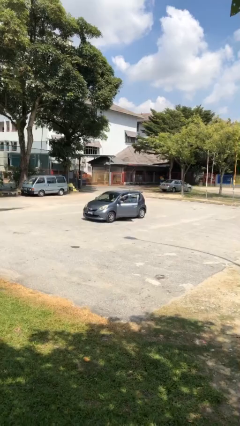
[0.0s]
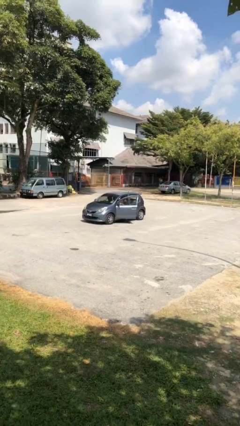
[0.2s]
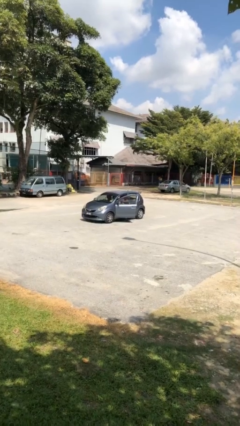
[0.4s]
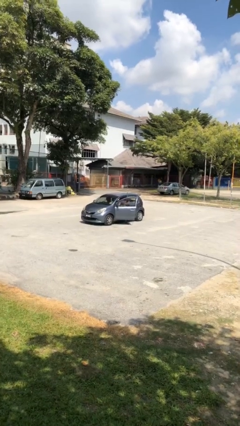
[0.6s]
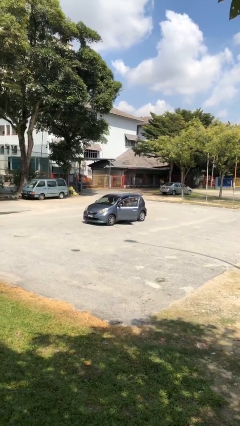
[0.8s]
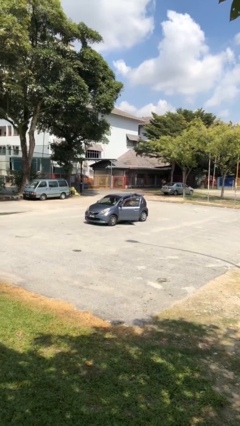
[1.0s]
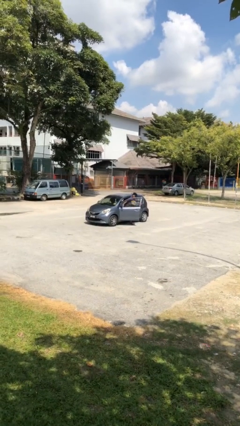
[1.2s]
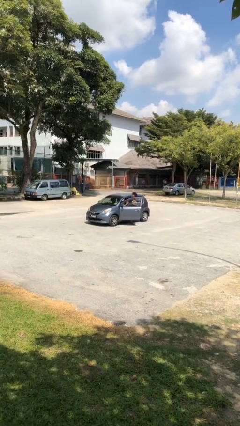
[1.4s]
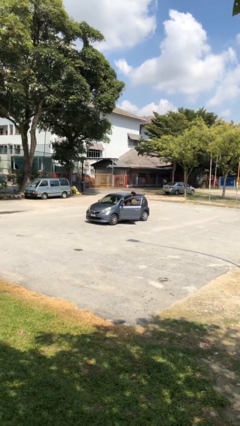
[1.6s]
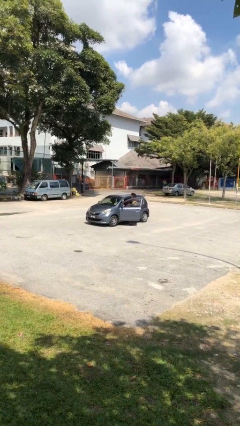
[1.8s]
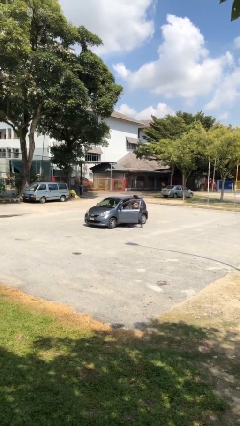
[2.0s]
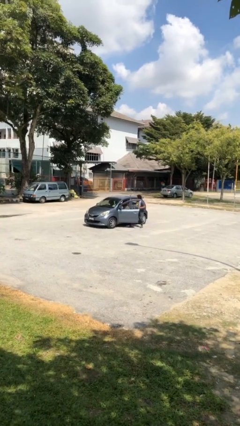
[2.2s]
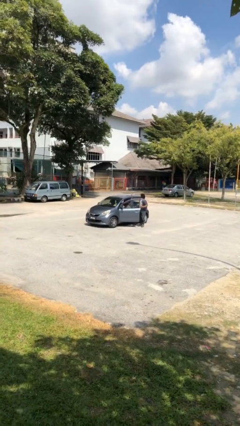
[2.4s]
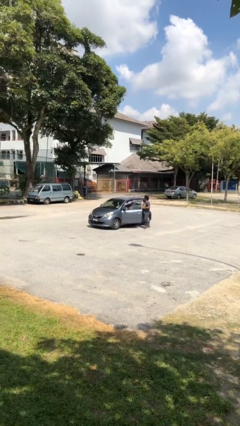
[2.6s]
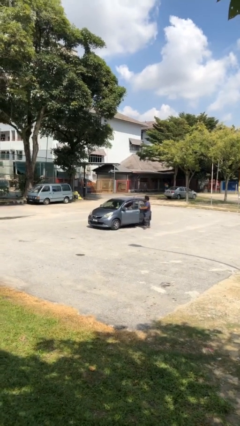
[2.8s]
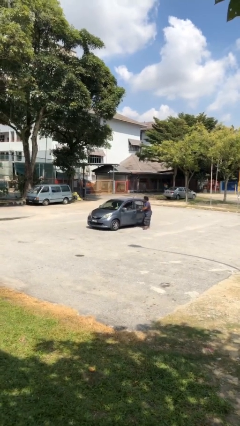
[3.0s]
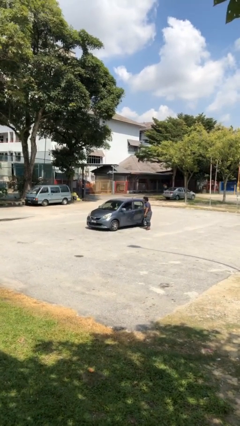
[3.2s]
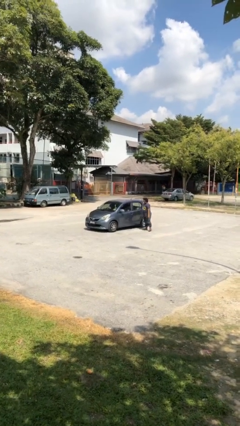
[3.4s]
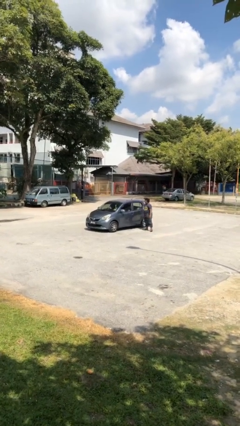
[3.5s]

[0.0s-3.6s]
car drops off person

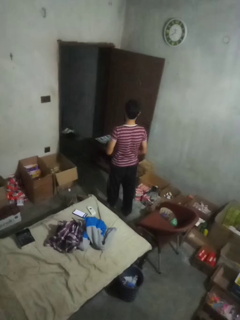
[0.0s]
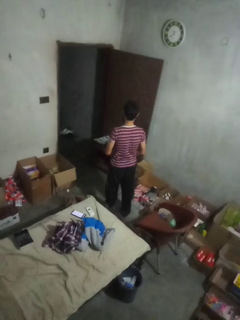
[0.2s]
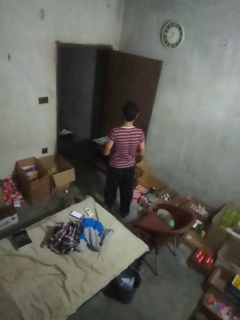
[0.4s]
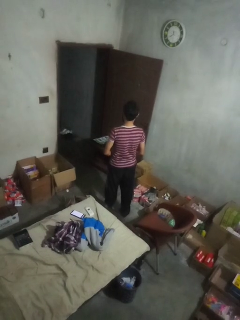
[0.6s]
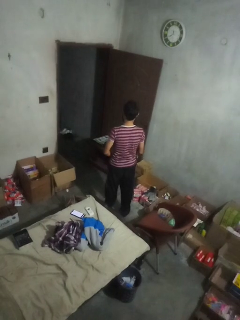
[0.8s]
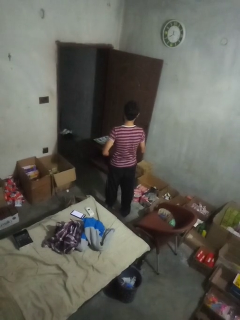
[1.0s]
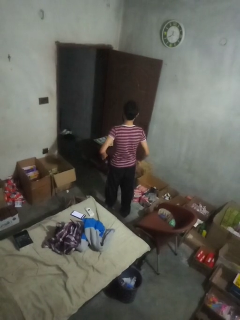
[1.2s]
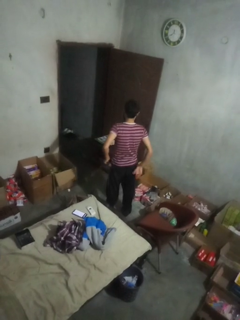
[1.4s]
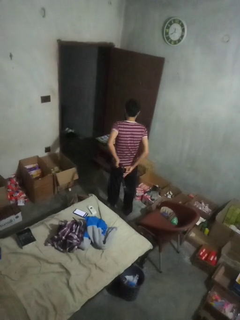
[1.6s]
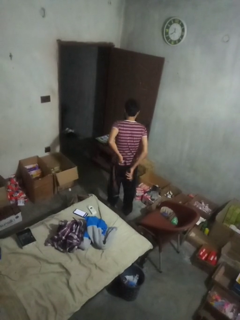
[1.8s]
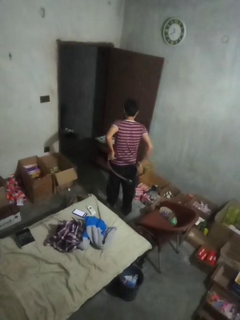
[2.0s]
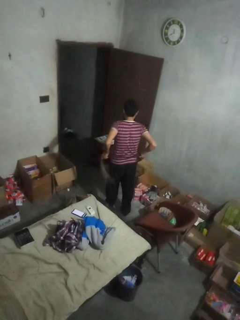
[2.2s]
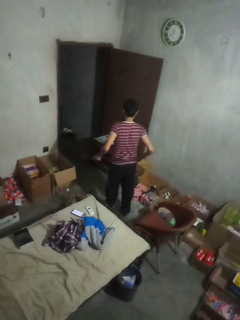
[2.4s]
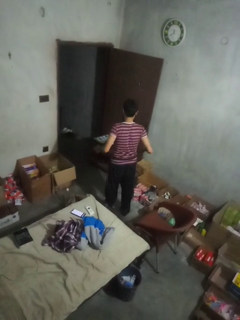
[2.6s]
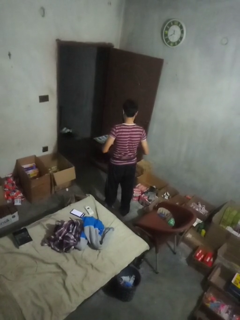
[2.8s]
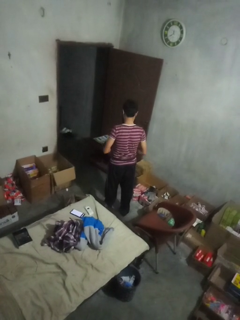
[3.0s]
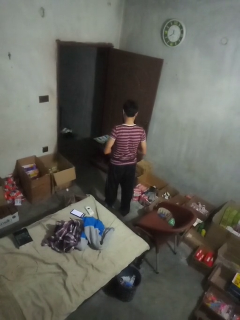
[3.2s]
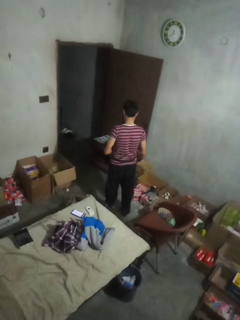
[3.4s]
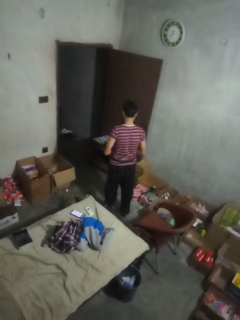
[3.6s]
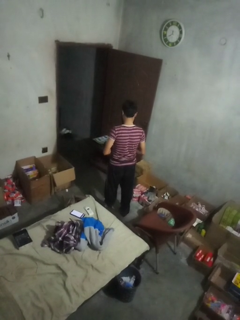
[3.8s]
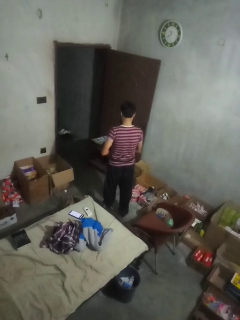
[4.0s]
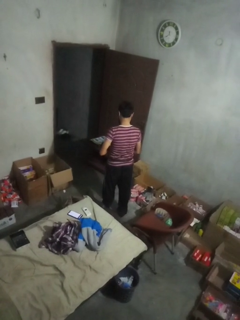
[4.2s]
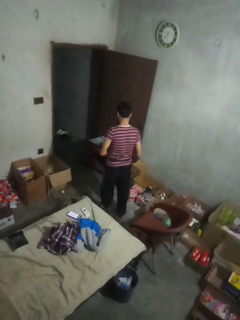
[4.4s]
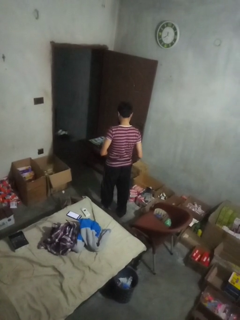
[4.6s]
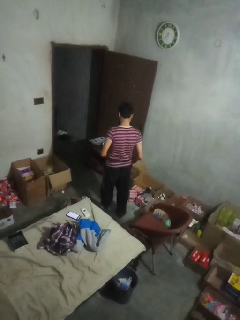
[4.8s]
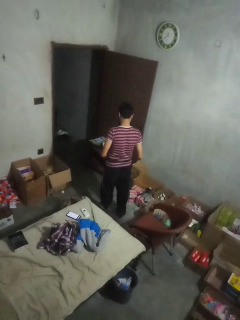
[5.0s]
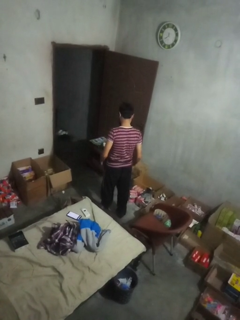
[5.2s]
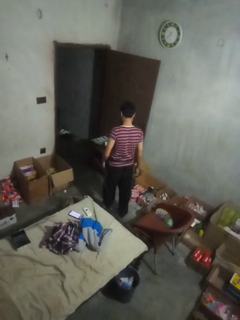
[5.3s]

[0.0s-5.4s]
person puts on belt

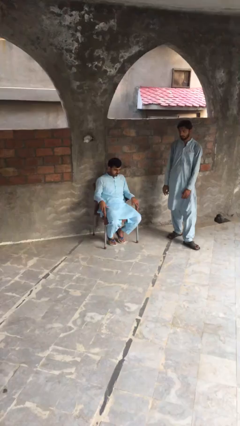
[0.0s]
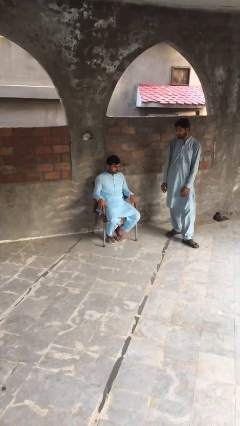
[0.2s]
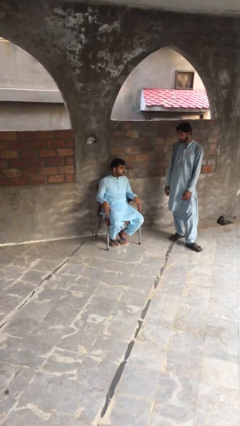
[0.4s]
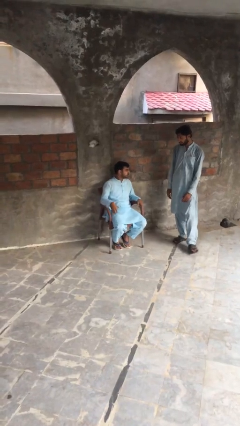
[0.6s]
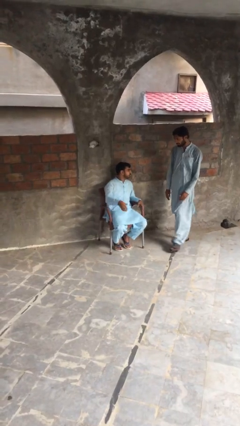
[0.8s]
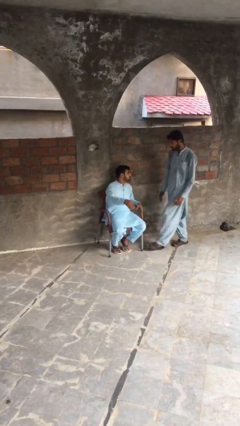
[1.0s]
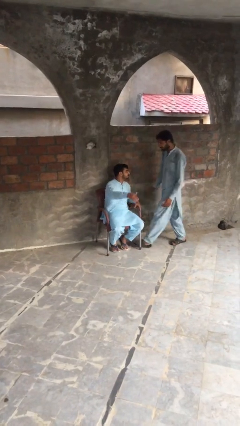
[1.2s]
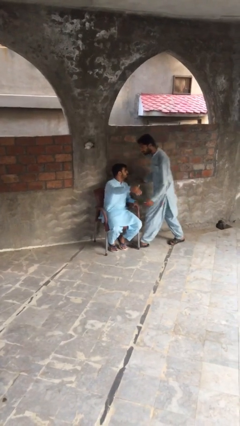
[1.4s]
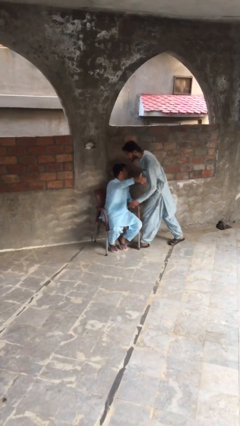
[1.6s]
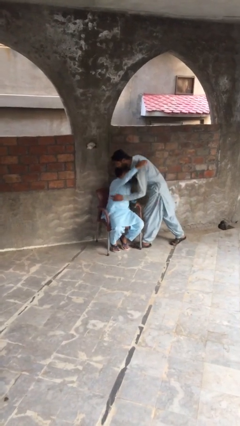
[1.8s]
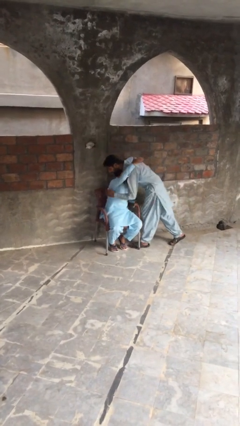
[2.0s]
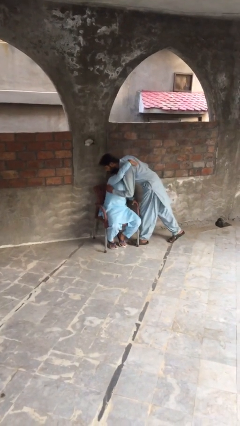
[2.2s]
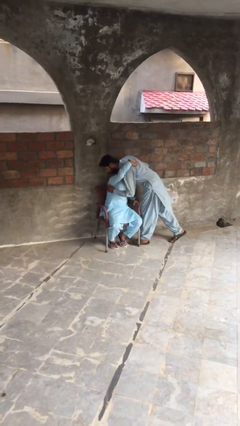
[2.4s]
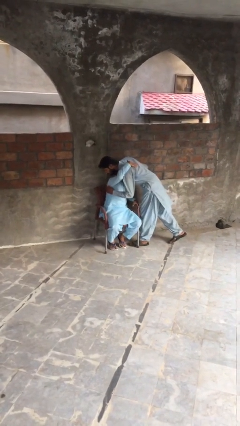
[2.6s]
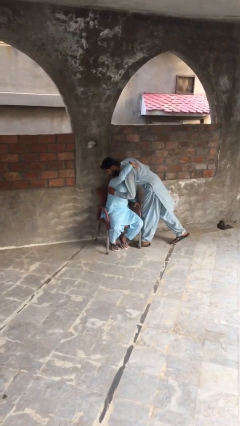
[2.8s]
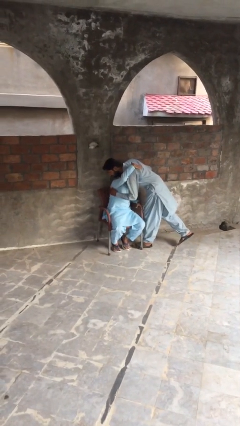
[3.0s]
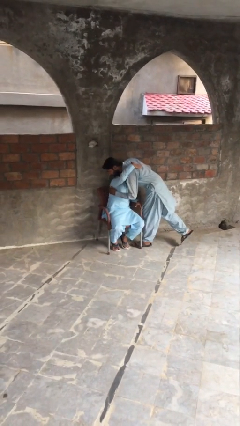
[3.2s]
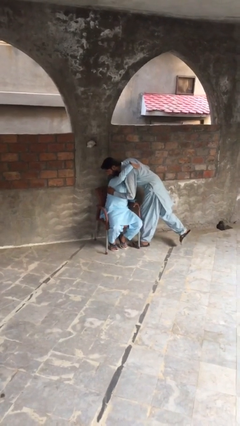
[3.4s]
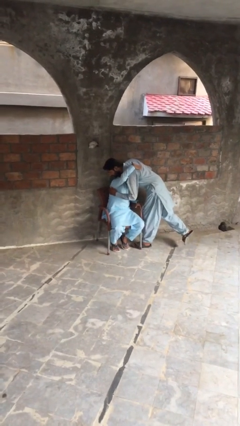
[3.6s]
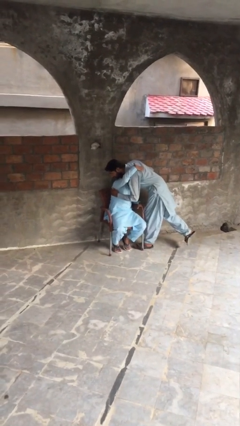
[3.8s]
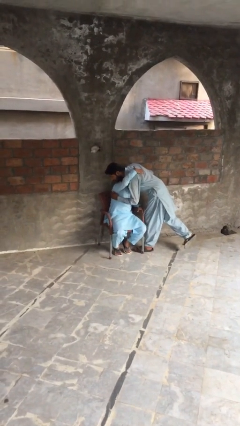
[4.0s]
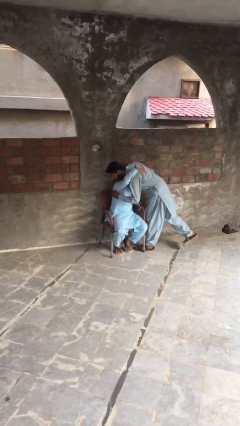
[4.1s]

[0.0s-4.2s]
person embraces person

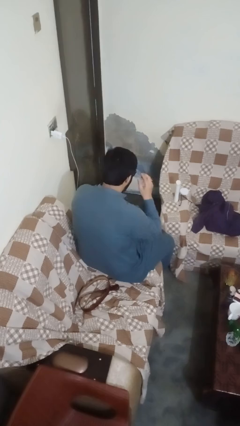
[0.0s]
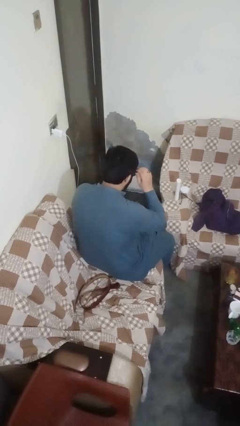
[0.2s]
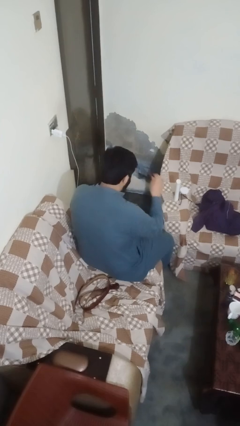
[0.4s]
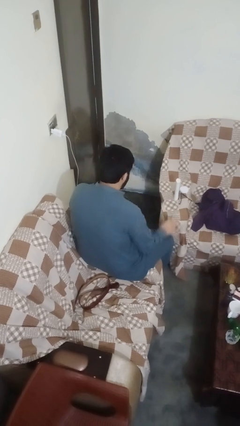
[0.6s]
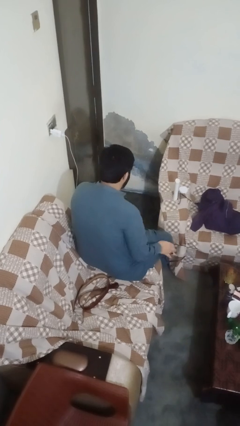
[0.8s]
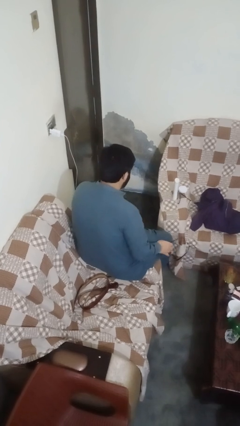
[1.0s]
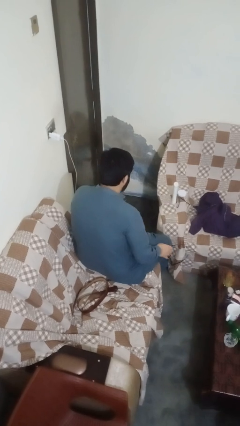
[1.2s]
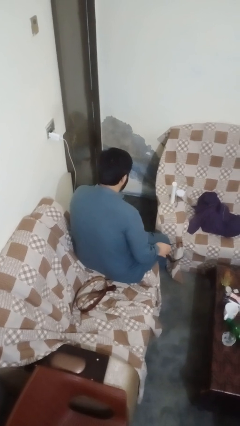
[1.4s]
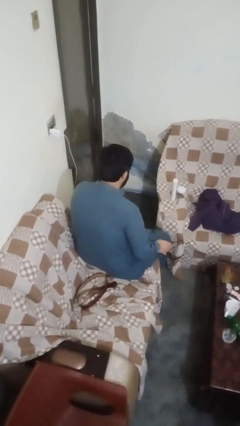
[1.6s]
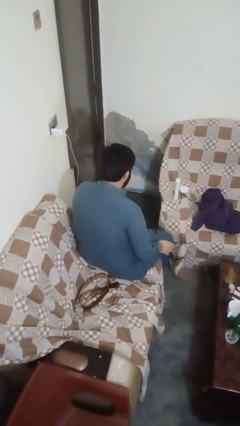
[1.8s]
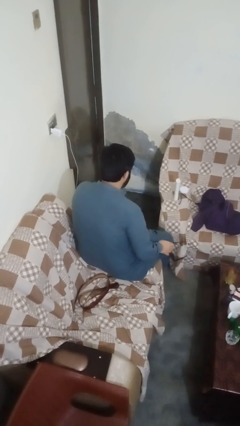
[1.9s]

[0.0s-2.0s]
person takes off sunglasses

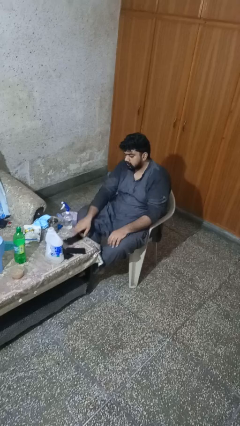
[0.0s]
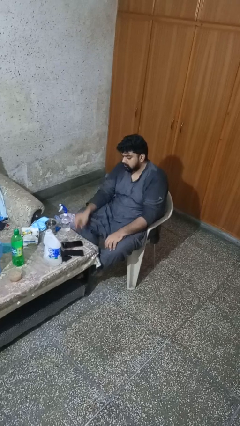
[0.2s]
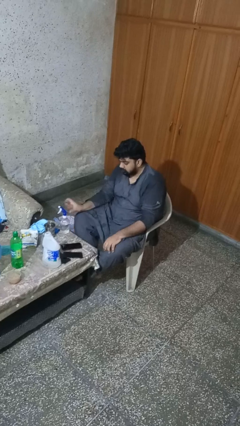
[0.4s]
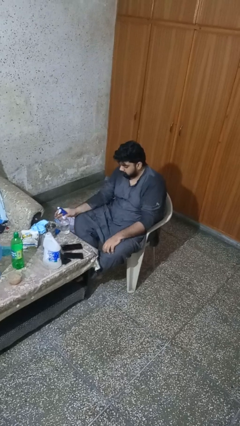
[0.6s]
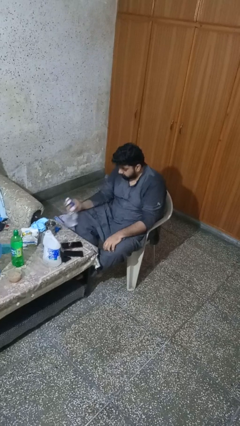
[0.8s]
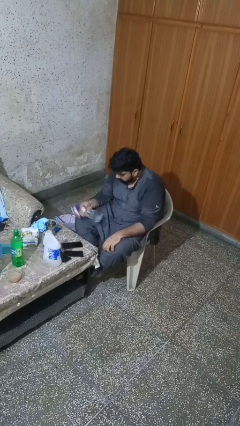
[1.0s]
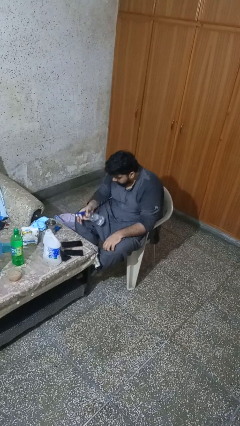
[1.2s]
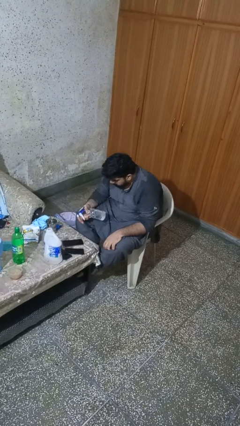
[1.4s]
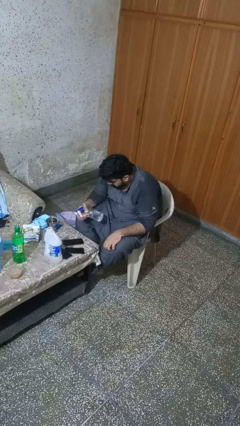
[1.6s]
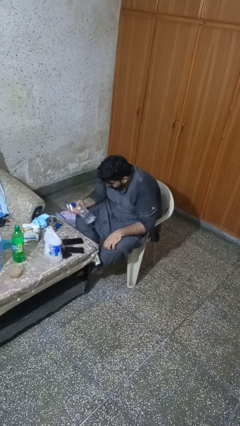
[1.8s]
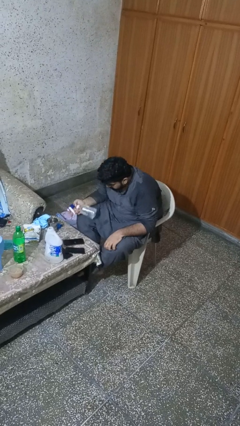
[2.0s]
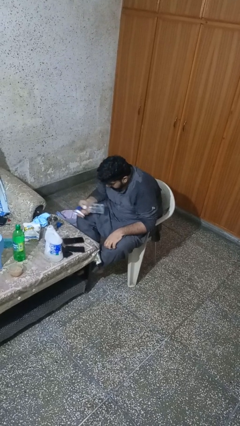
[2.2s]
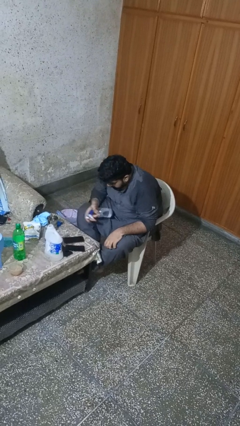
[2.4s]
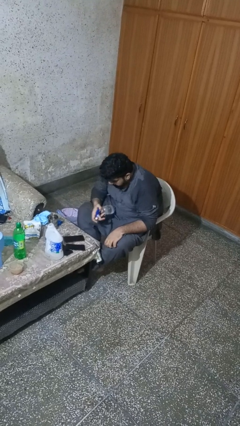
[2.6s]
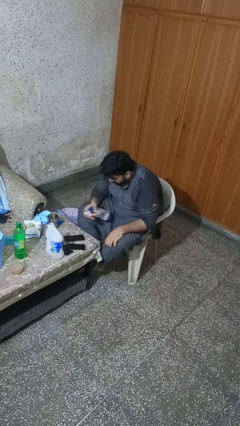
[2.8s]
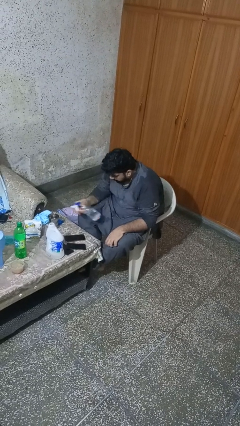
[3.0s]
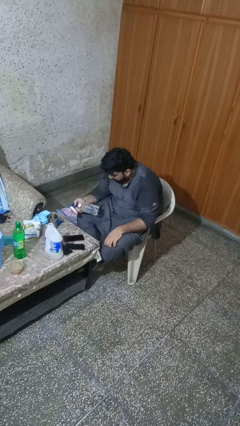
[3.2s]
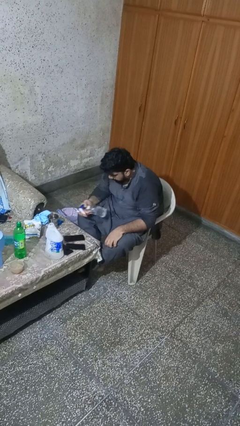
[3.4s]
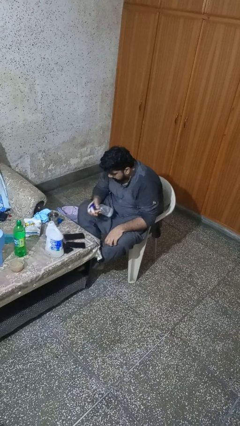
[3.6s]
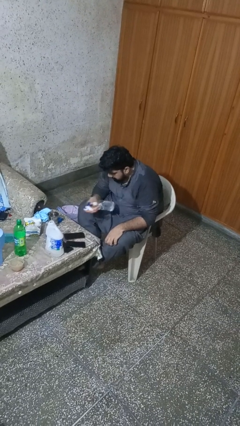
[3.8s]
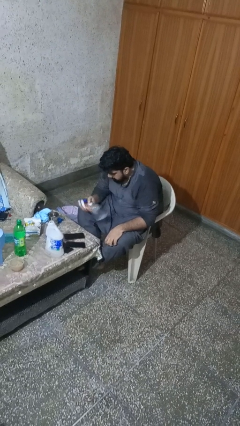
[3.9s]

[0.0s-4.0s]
person sprays from bottle
